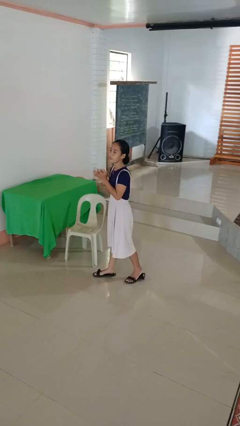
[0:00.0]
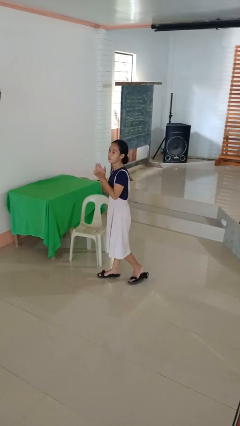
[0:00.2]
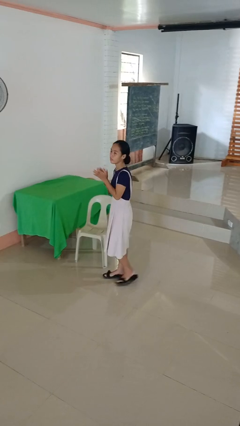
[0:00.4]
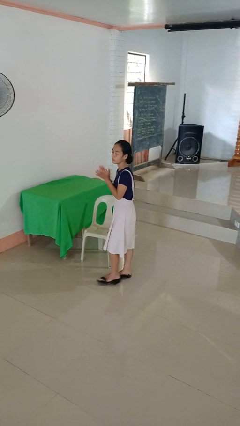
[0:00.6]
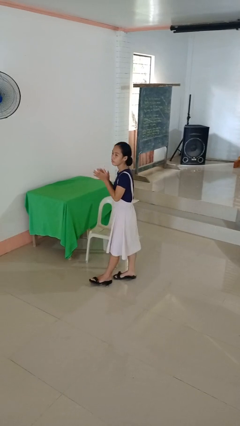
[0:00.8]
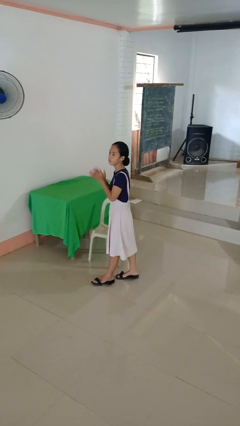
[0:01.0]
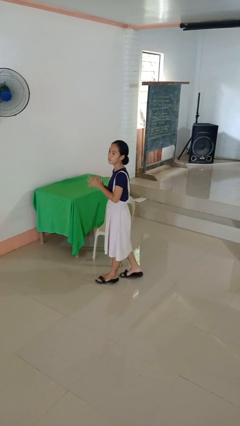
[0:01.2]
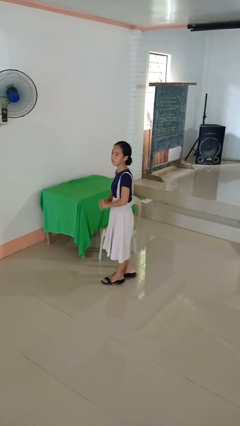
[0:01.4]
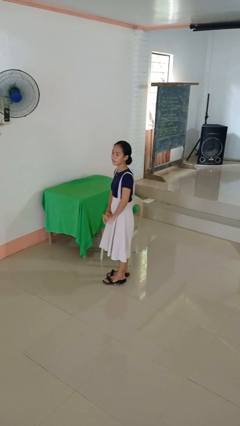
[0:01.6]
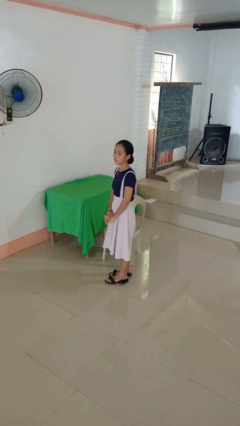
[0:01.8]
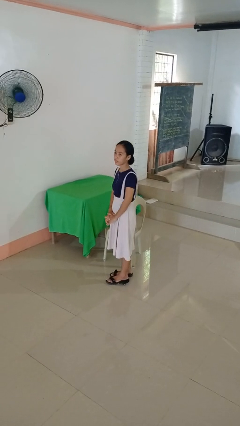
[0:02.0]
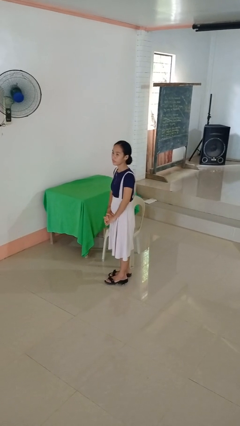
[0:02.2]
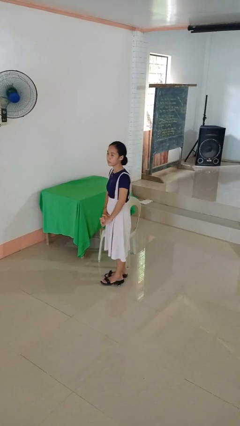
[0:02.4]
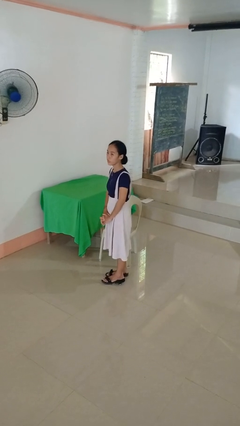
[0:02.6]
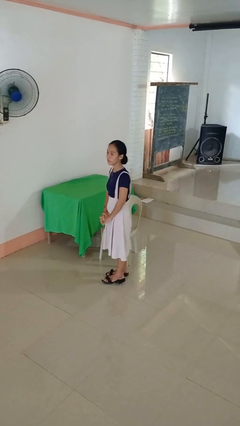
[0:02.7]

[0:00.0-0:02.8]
person claps hands

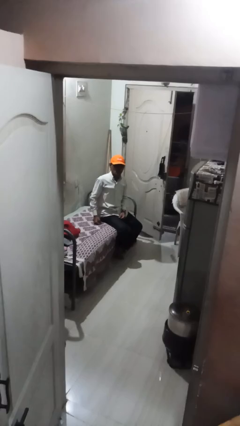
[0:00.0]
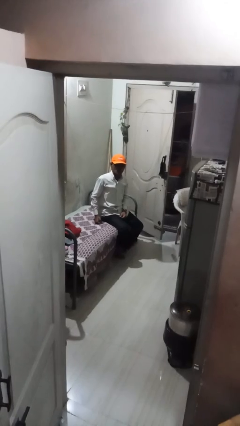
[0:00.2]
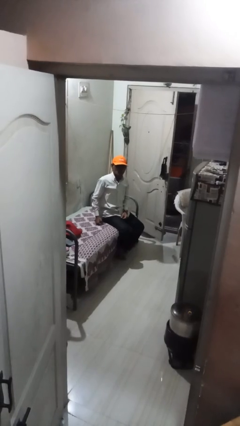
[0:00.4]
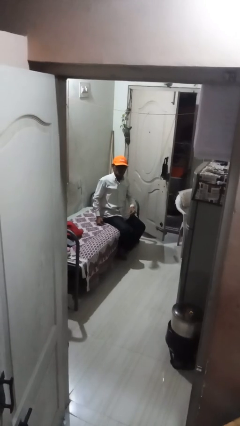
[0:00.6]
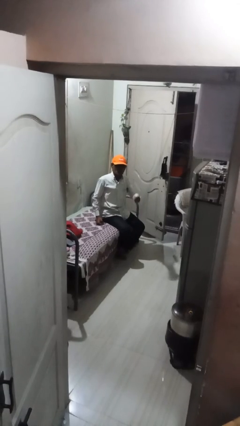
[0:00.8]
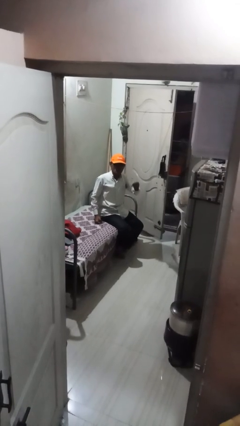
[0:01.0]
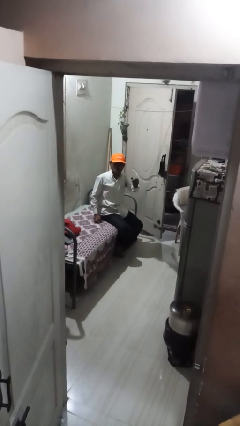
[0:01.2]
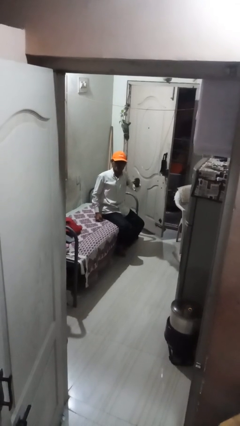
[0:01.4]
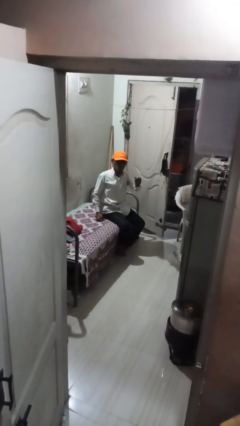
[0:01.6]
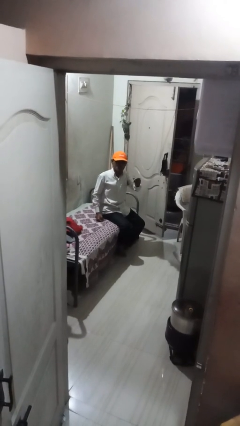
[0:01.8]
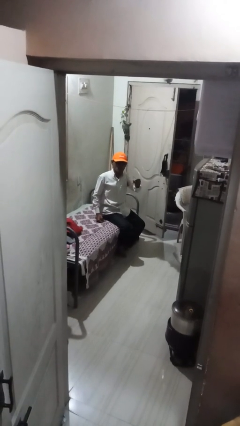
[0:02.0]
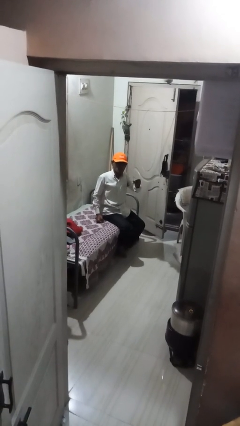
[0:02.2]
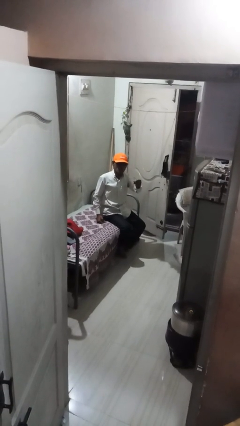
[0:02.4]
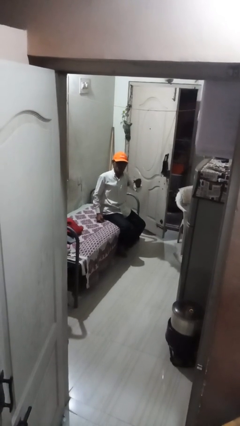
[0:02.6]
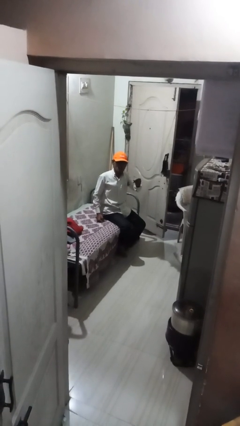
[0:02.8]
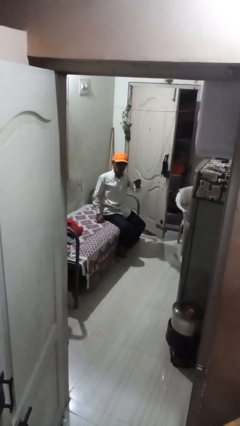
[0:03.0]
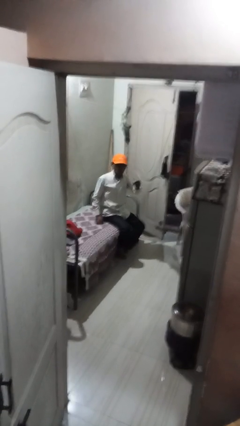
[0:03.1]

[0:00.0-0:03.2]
person snaps fingers

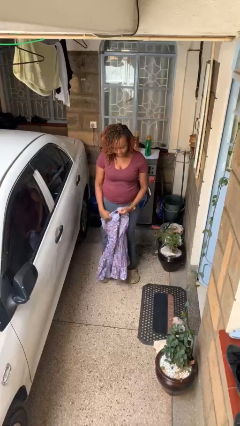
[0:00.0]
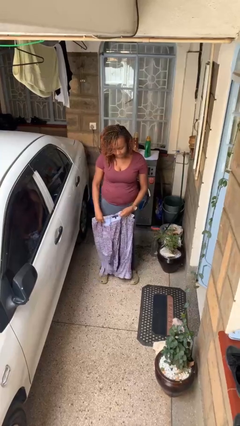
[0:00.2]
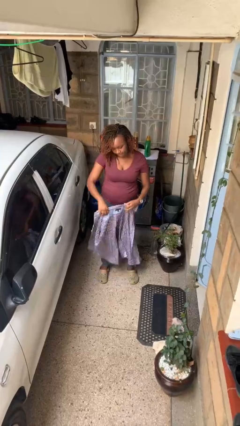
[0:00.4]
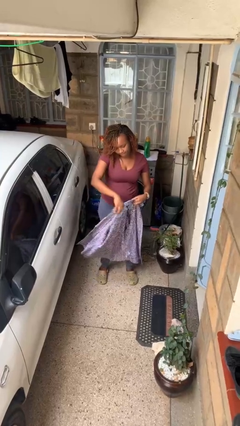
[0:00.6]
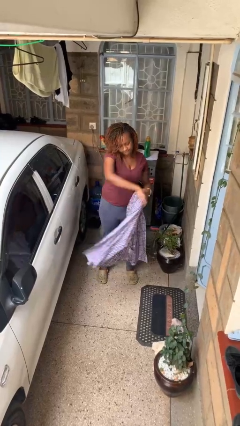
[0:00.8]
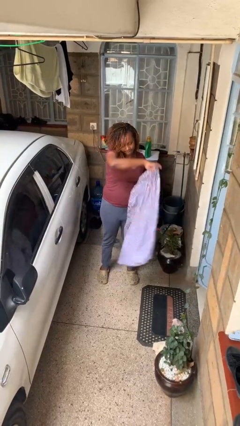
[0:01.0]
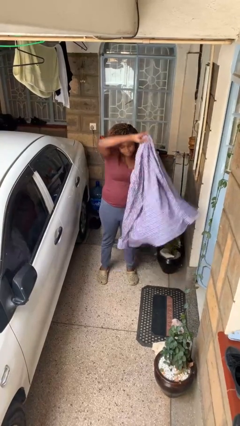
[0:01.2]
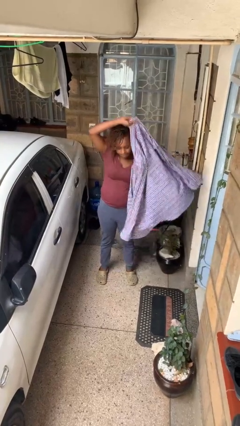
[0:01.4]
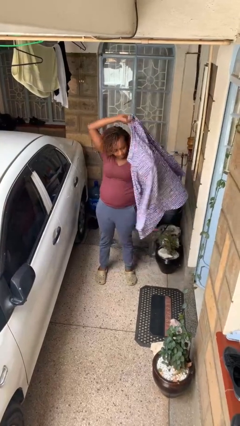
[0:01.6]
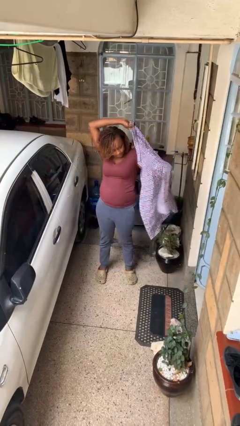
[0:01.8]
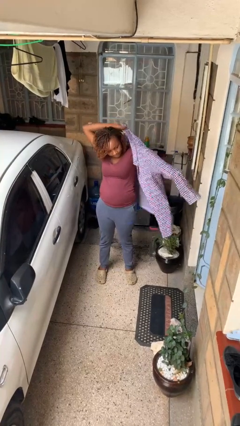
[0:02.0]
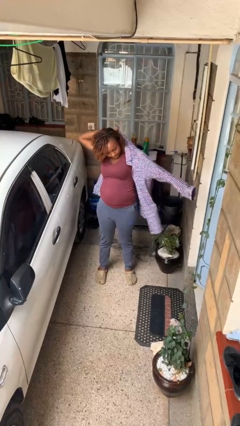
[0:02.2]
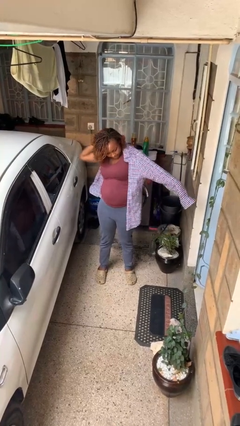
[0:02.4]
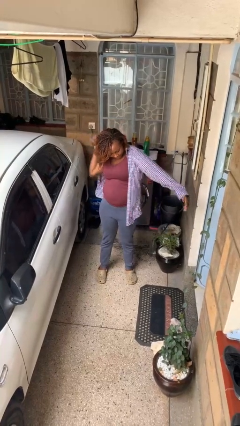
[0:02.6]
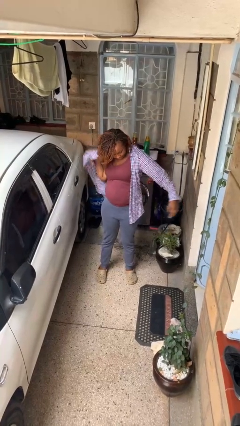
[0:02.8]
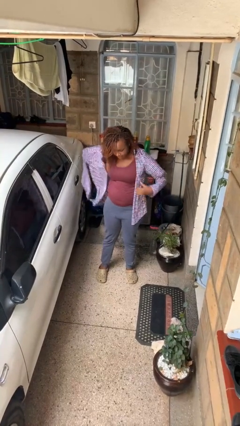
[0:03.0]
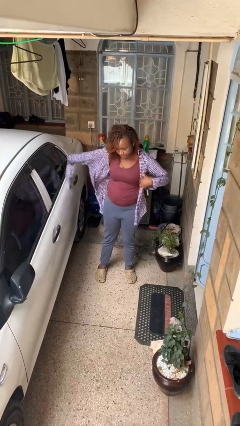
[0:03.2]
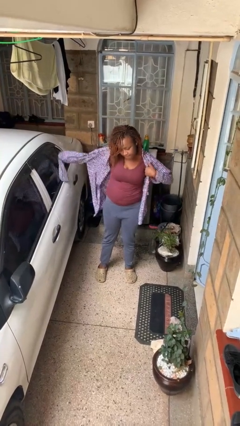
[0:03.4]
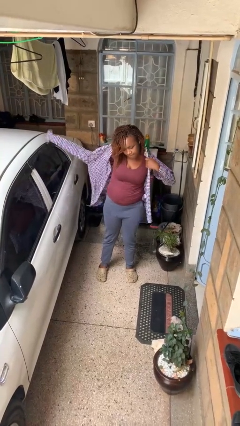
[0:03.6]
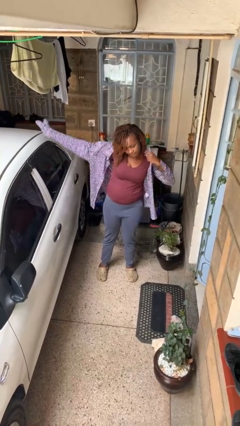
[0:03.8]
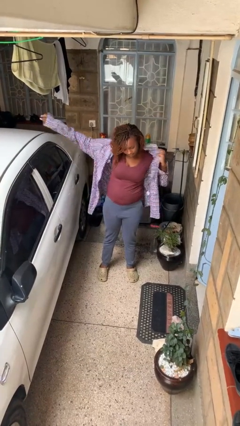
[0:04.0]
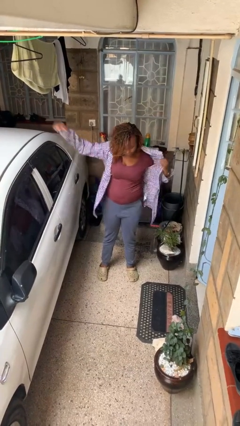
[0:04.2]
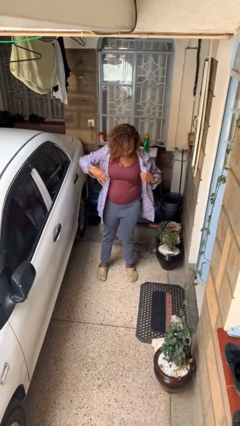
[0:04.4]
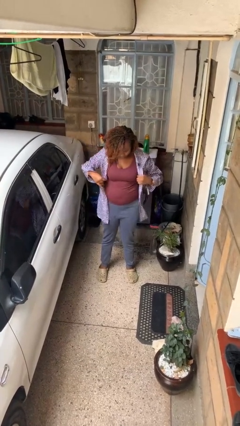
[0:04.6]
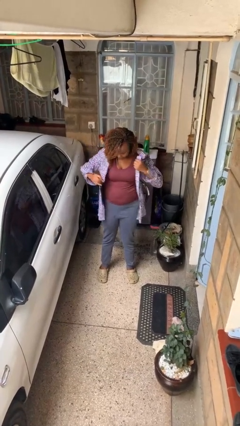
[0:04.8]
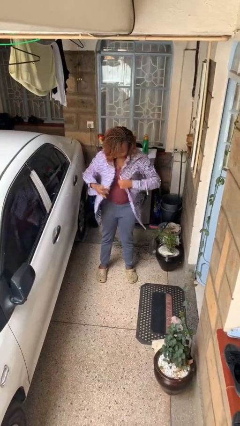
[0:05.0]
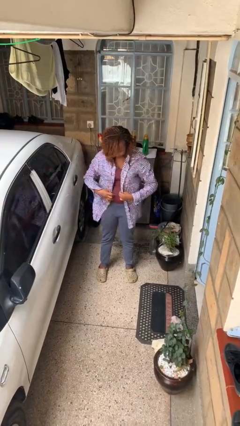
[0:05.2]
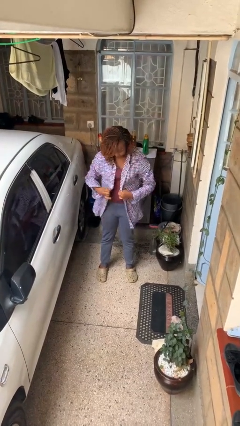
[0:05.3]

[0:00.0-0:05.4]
person puts on shirt

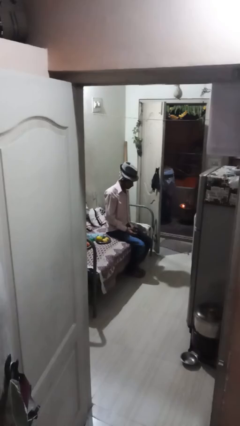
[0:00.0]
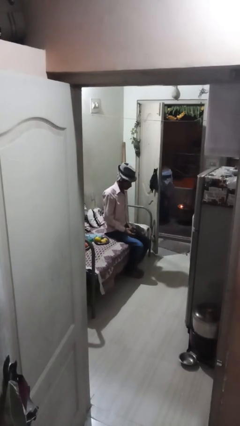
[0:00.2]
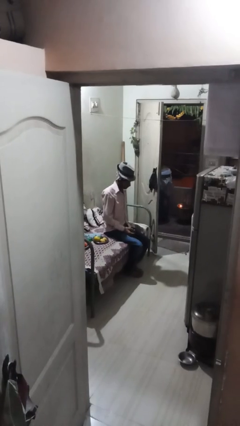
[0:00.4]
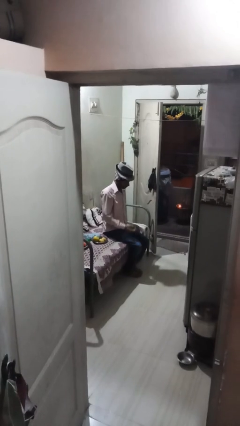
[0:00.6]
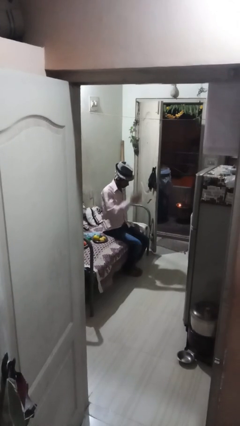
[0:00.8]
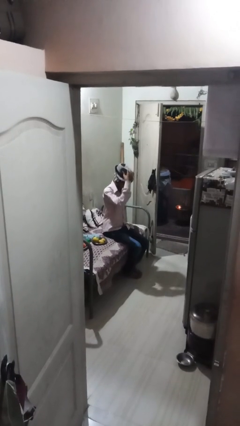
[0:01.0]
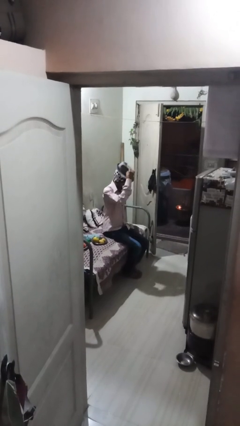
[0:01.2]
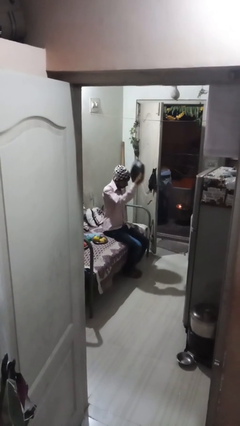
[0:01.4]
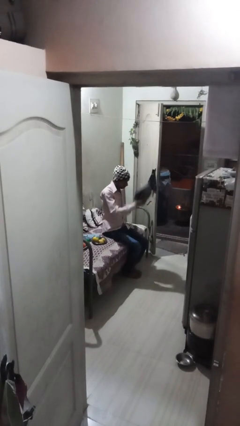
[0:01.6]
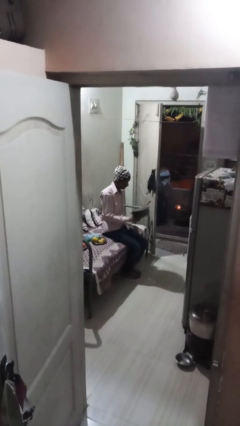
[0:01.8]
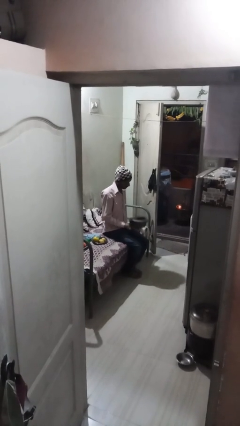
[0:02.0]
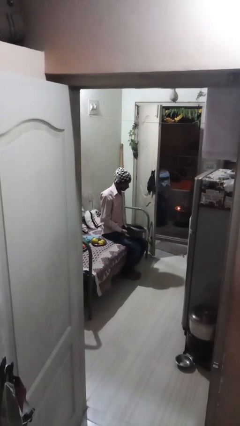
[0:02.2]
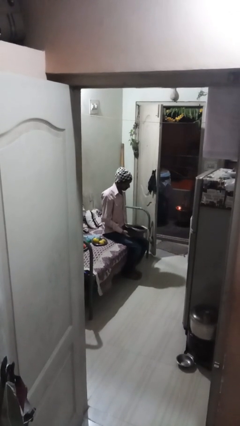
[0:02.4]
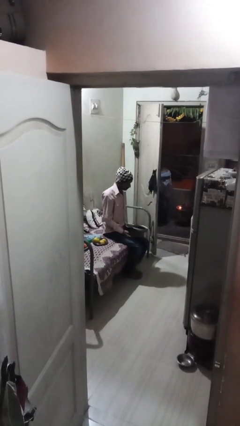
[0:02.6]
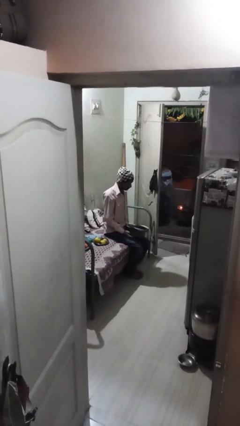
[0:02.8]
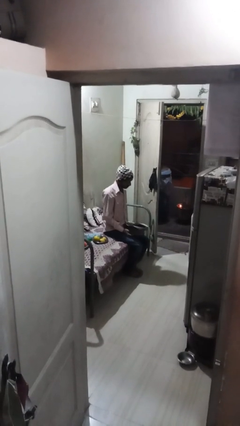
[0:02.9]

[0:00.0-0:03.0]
person takes off hat

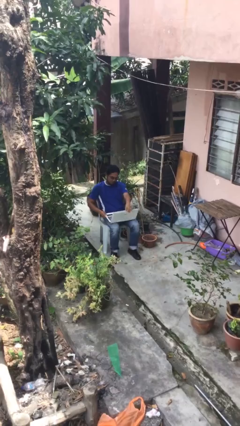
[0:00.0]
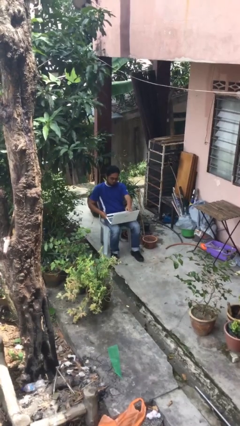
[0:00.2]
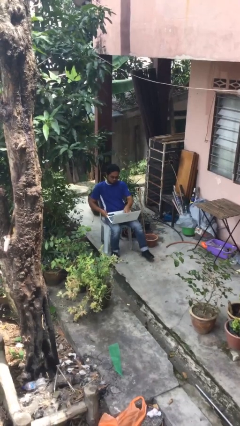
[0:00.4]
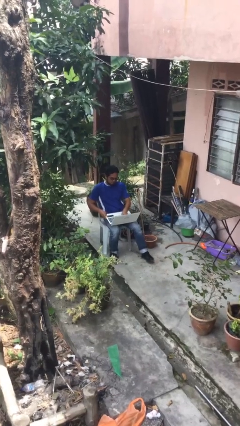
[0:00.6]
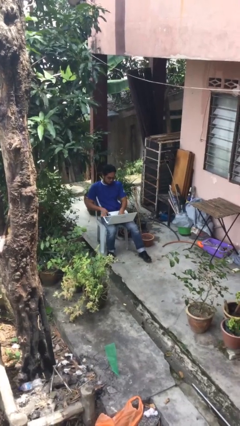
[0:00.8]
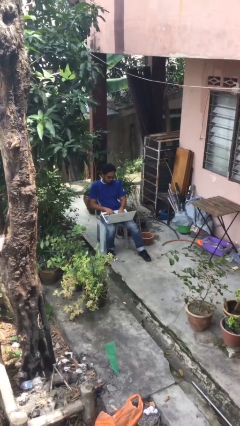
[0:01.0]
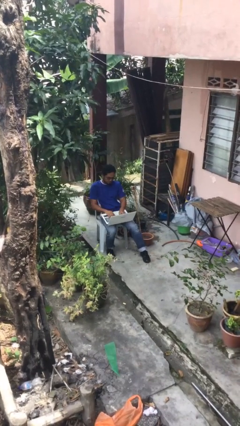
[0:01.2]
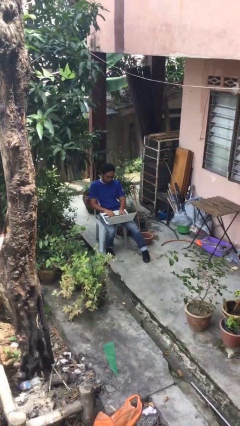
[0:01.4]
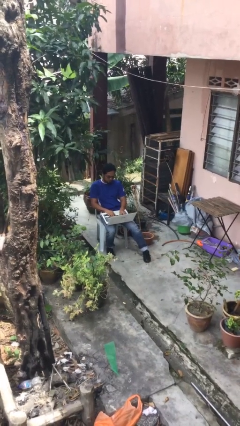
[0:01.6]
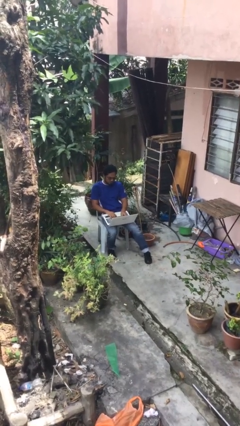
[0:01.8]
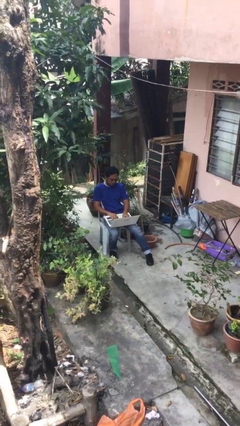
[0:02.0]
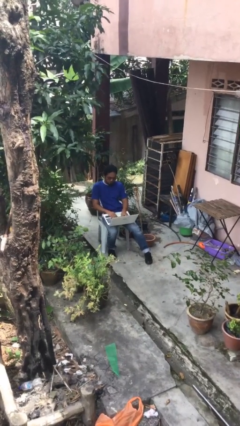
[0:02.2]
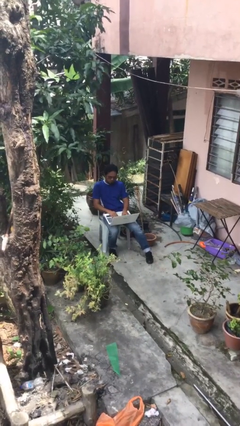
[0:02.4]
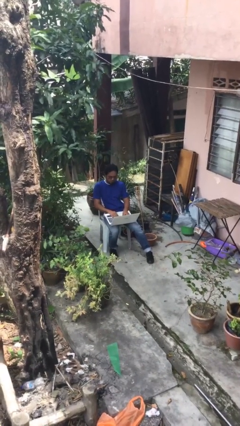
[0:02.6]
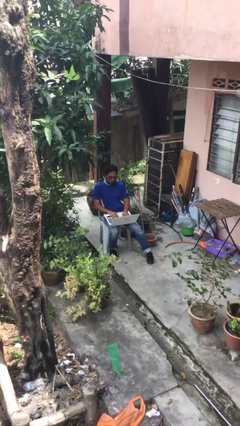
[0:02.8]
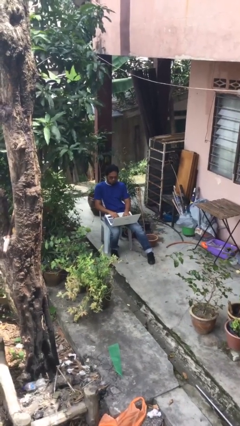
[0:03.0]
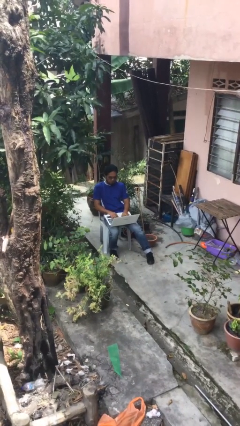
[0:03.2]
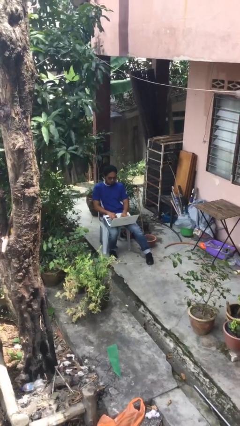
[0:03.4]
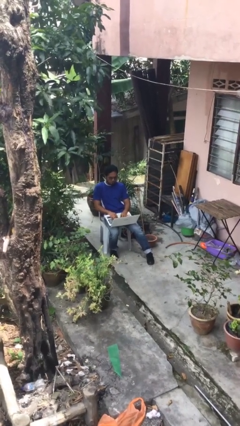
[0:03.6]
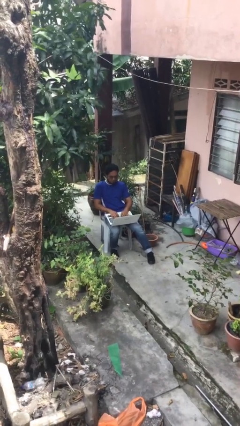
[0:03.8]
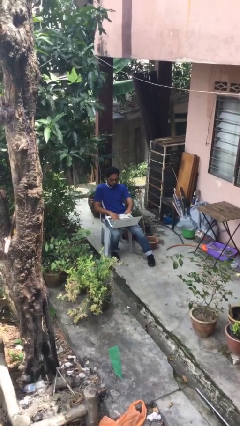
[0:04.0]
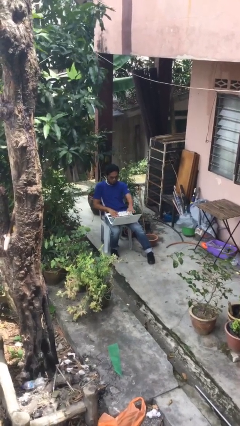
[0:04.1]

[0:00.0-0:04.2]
person interacts with laptop
